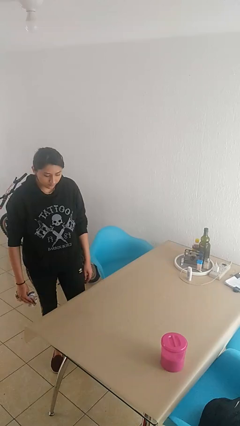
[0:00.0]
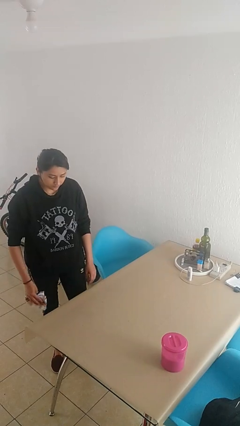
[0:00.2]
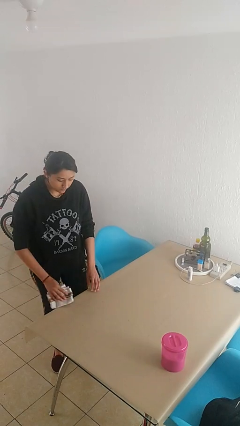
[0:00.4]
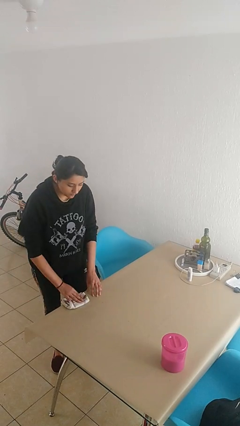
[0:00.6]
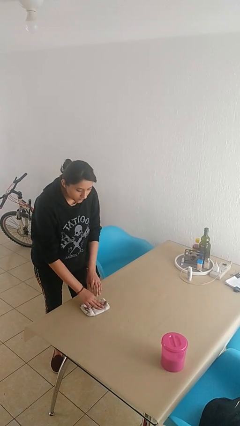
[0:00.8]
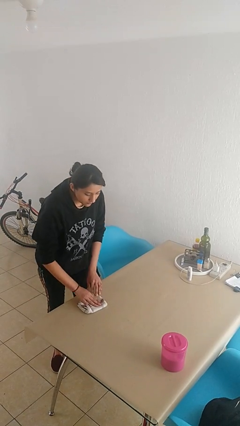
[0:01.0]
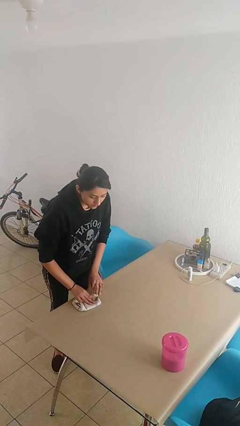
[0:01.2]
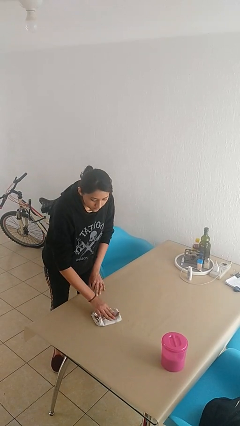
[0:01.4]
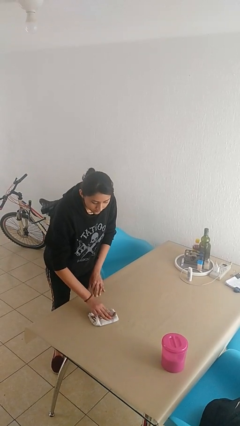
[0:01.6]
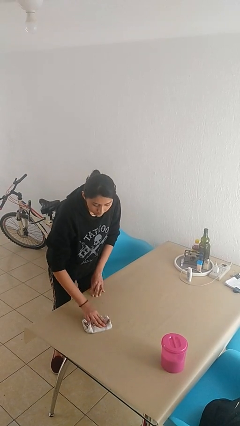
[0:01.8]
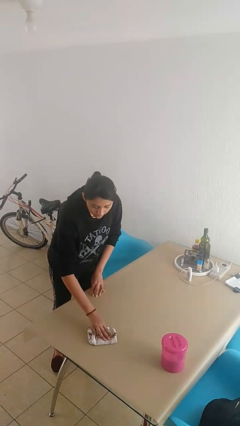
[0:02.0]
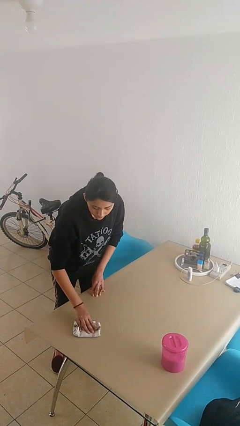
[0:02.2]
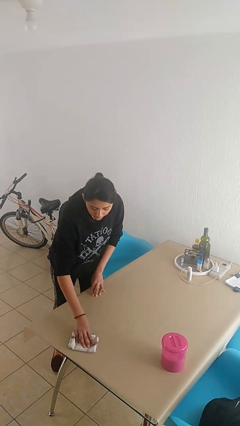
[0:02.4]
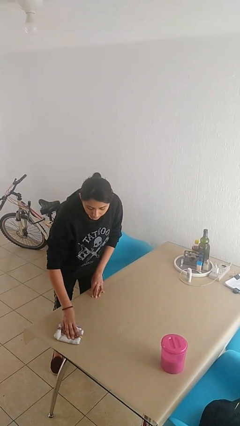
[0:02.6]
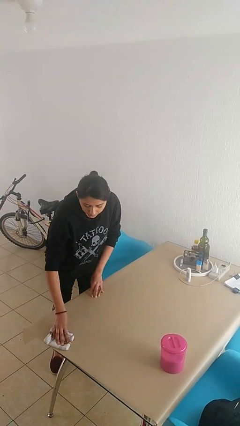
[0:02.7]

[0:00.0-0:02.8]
person cleans table with rag

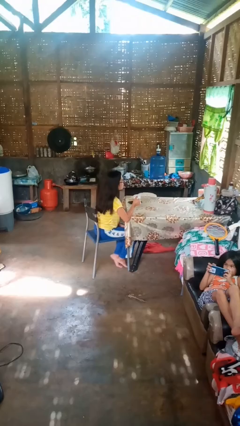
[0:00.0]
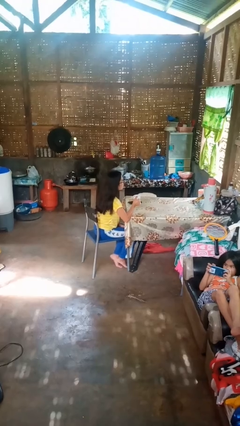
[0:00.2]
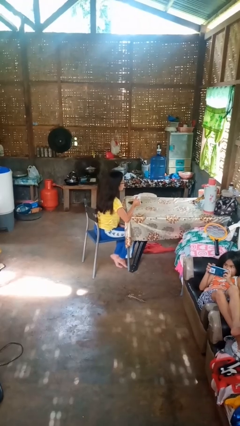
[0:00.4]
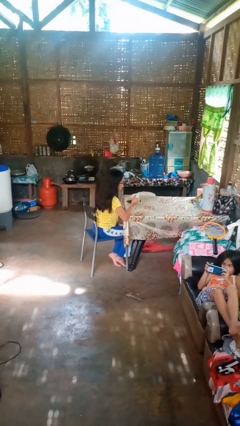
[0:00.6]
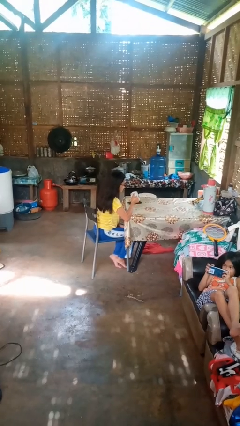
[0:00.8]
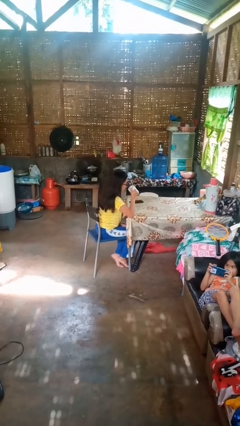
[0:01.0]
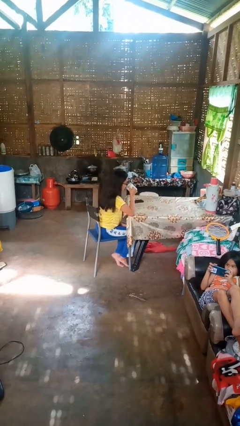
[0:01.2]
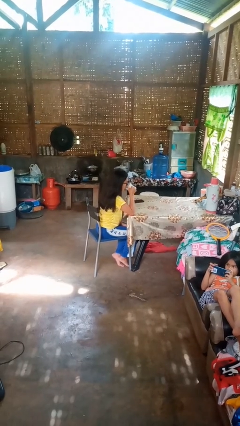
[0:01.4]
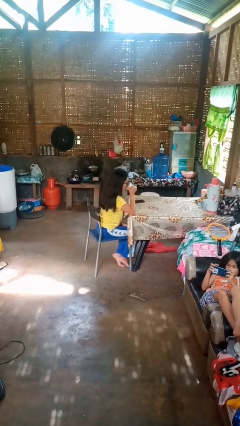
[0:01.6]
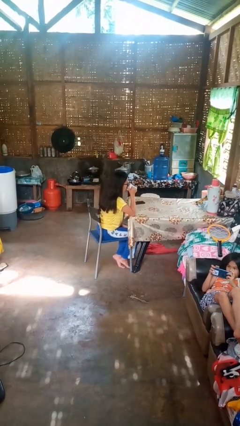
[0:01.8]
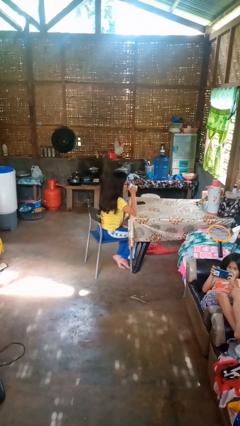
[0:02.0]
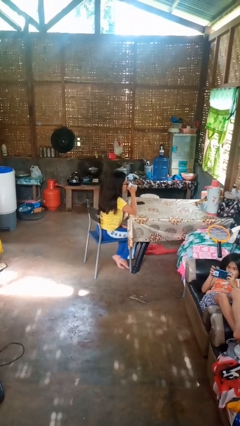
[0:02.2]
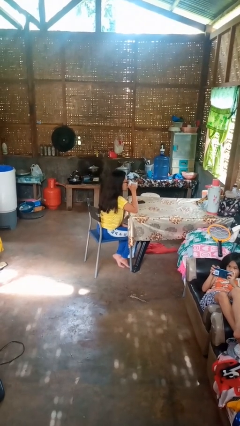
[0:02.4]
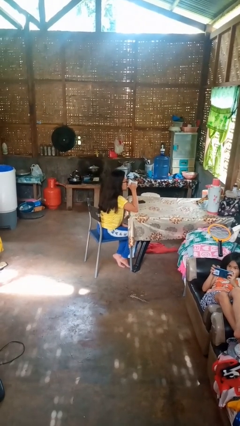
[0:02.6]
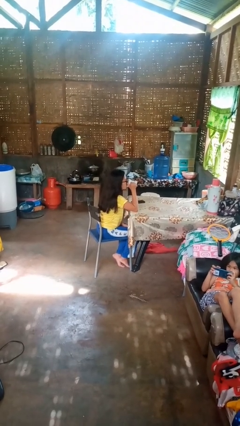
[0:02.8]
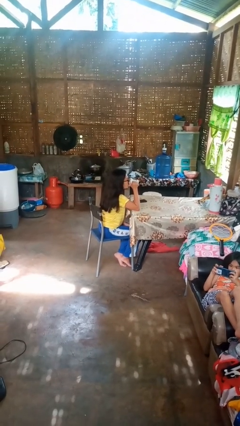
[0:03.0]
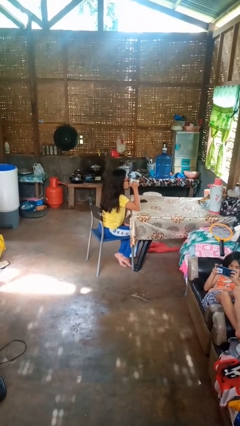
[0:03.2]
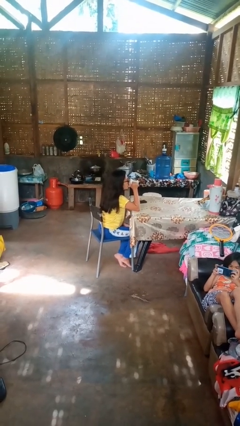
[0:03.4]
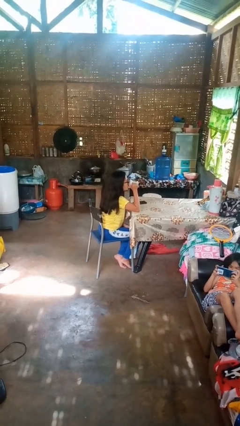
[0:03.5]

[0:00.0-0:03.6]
person drinks from mug

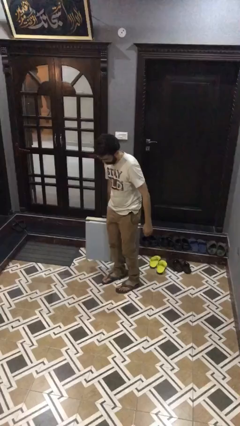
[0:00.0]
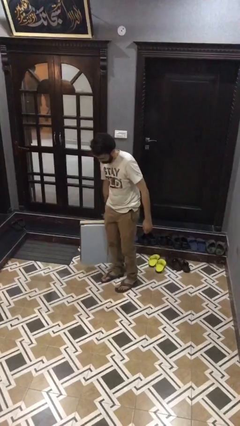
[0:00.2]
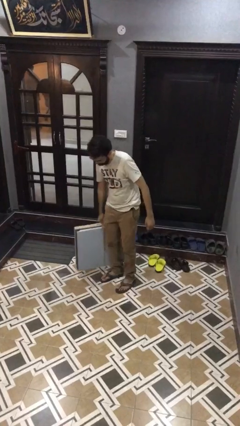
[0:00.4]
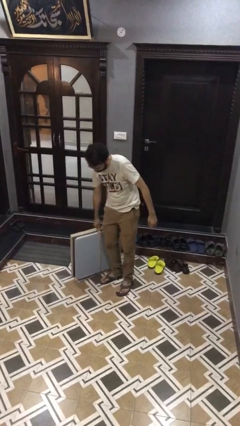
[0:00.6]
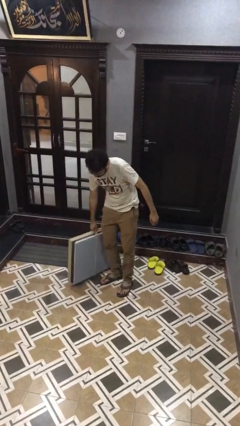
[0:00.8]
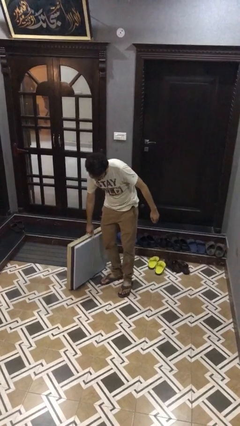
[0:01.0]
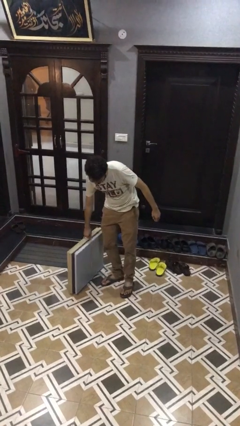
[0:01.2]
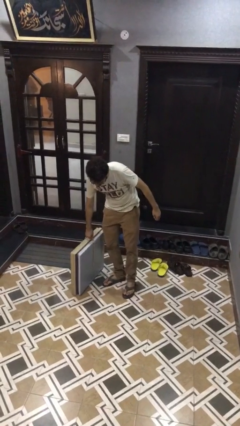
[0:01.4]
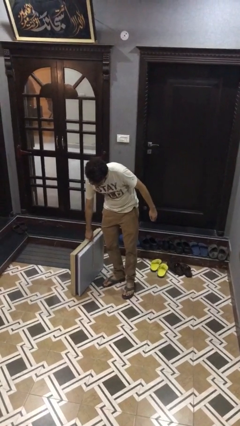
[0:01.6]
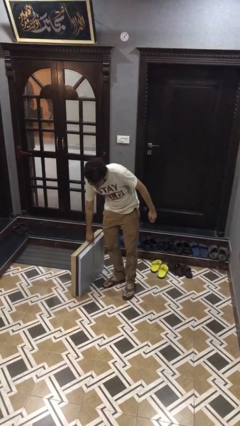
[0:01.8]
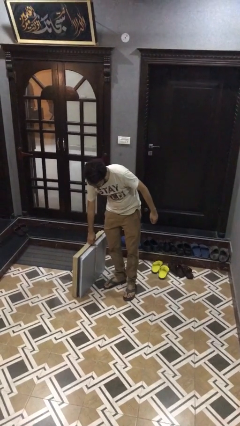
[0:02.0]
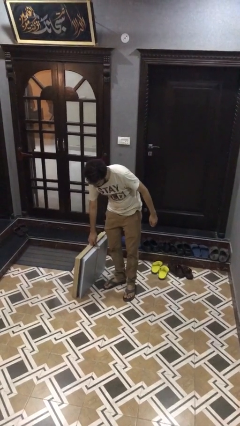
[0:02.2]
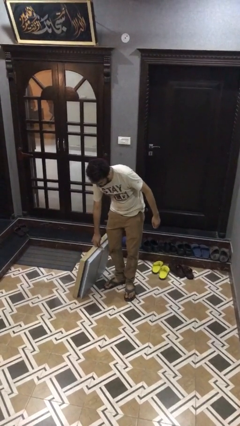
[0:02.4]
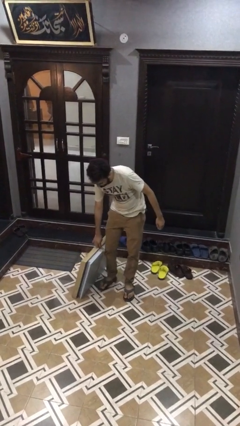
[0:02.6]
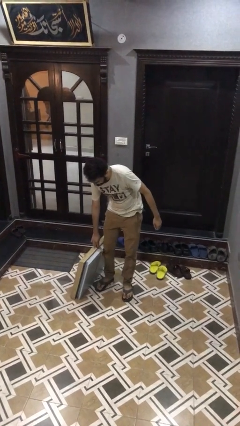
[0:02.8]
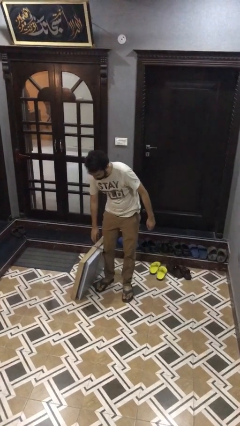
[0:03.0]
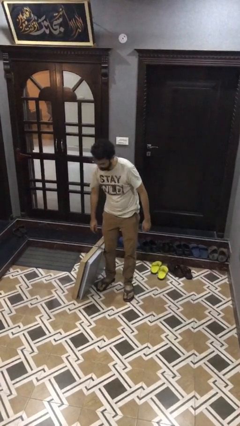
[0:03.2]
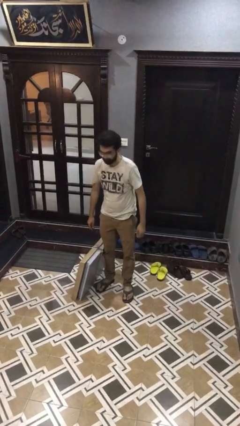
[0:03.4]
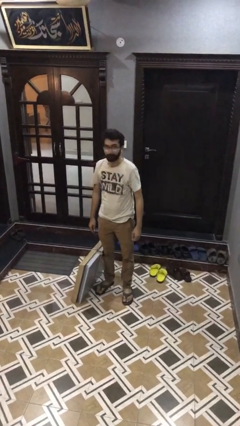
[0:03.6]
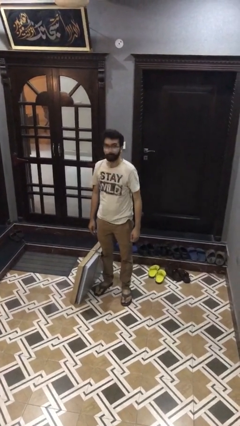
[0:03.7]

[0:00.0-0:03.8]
person puts down object on floor

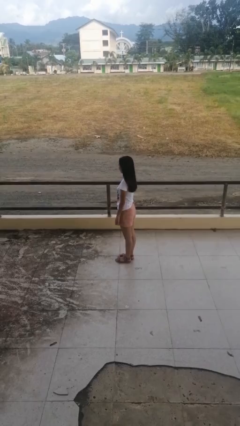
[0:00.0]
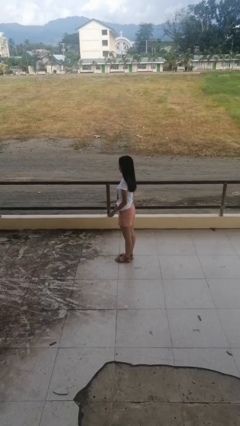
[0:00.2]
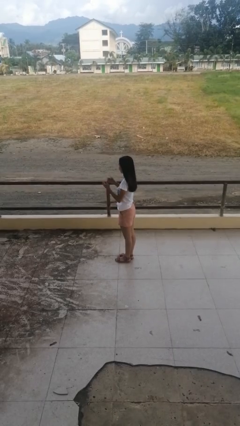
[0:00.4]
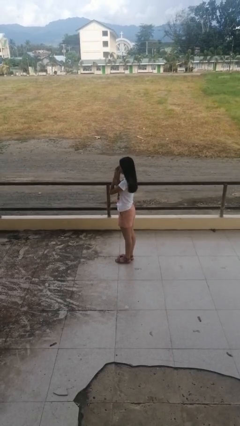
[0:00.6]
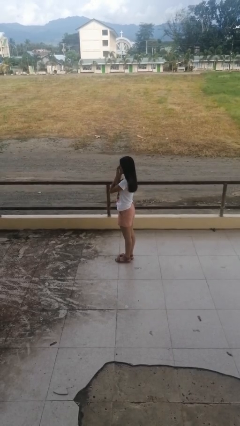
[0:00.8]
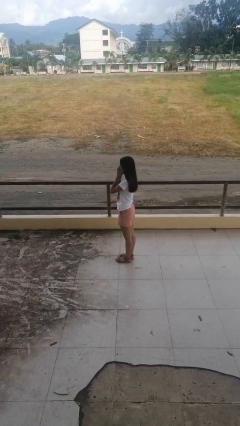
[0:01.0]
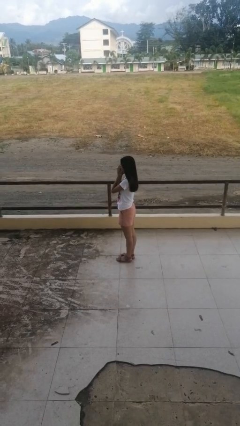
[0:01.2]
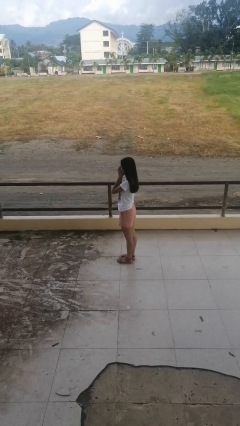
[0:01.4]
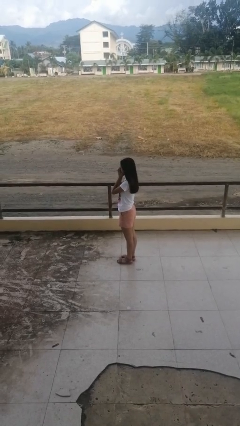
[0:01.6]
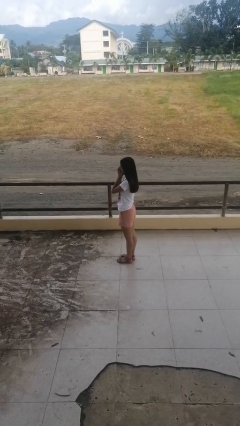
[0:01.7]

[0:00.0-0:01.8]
person rubs eyes

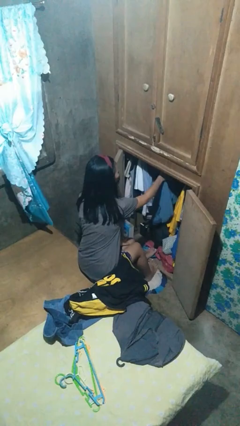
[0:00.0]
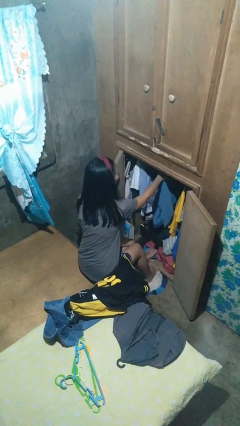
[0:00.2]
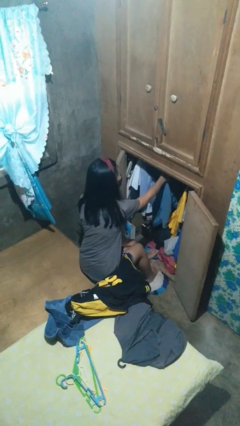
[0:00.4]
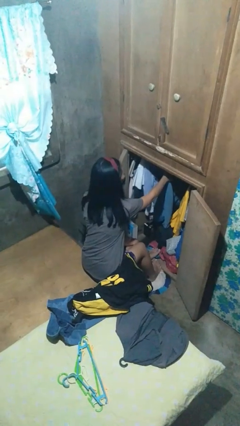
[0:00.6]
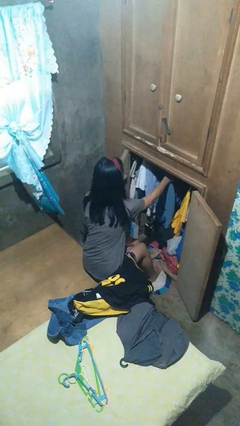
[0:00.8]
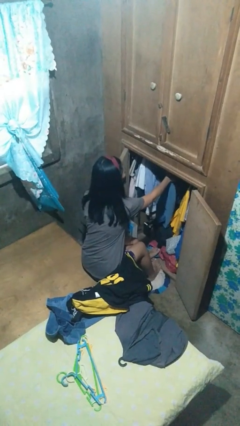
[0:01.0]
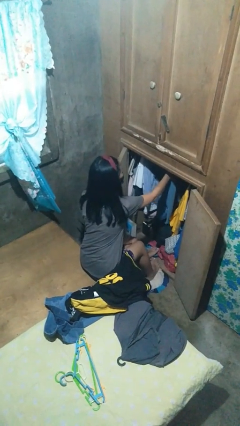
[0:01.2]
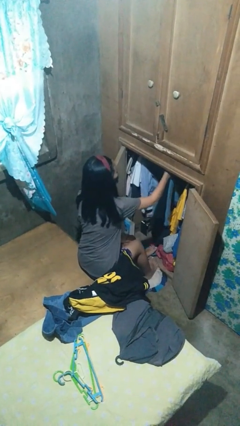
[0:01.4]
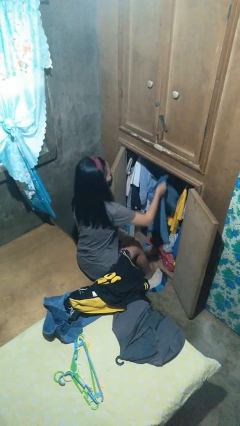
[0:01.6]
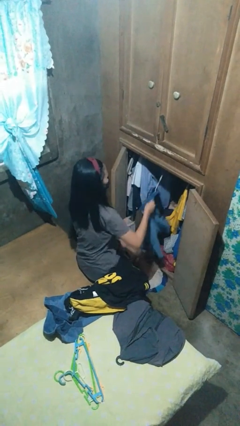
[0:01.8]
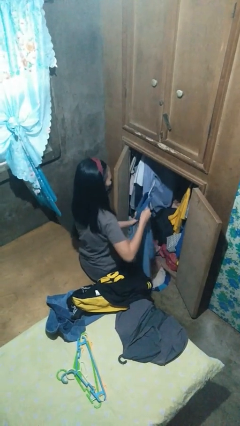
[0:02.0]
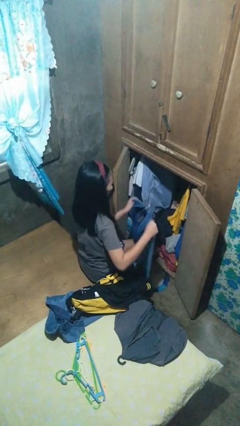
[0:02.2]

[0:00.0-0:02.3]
person takes clothes from closet

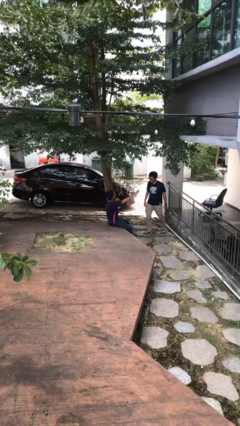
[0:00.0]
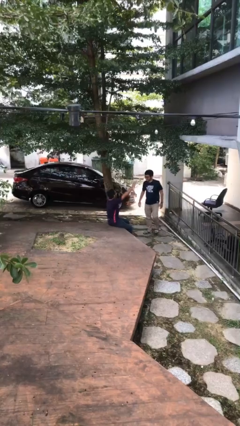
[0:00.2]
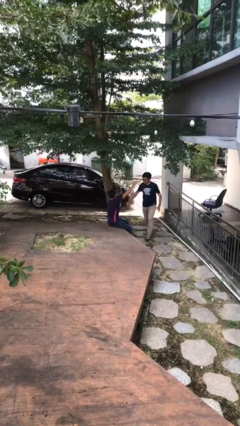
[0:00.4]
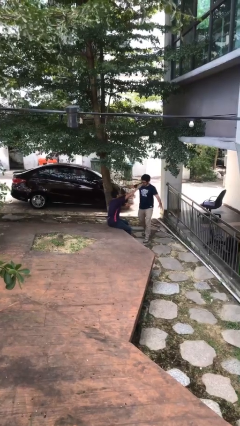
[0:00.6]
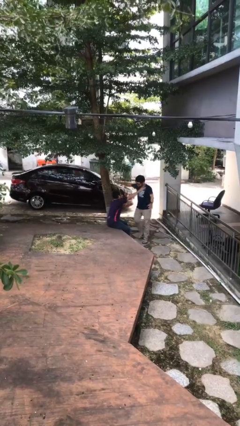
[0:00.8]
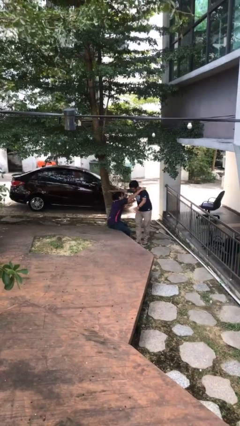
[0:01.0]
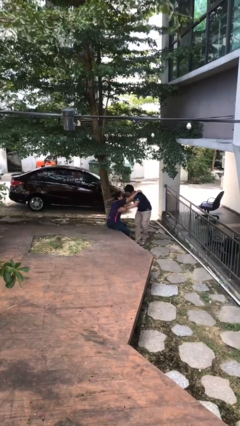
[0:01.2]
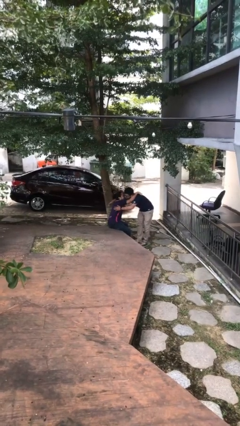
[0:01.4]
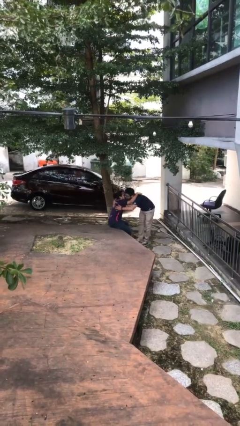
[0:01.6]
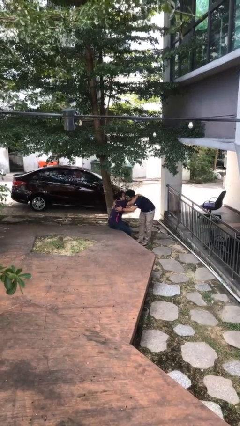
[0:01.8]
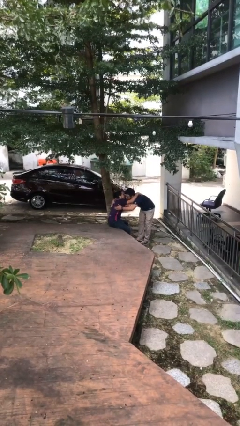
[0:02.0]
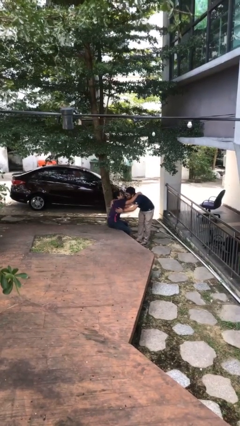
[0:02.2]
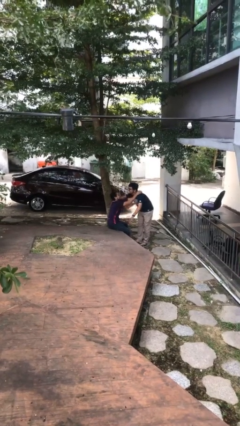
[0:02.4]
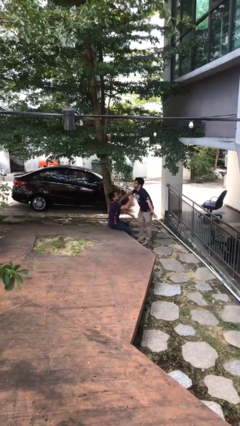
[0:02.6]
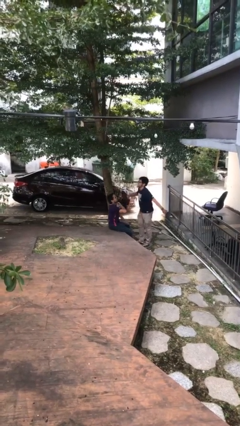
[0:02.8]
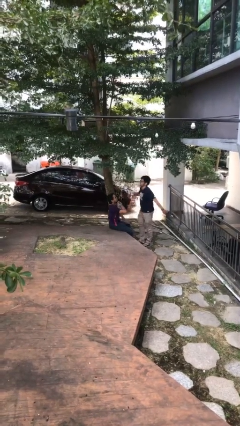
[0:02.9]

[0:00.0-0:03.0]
person embraces person
